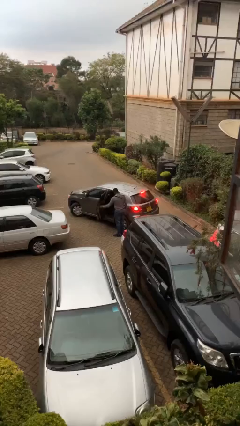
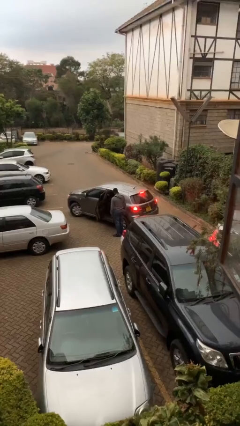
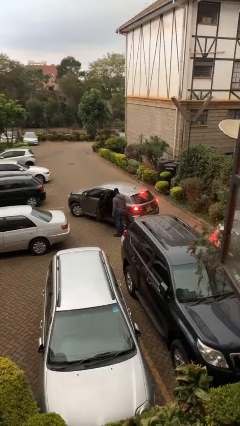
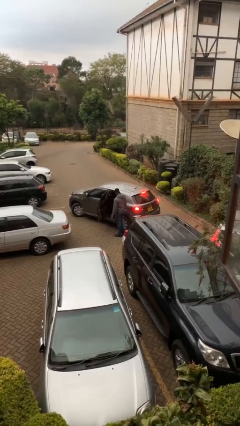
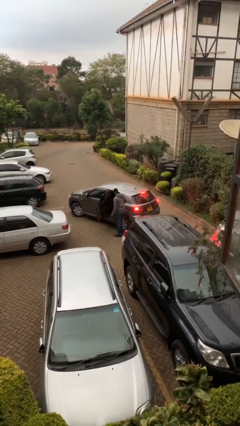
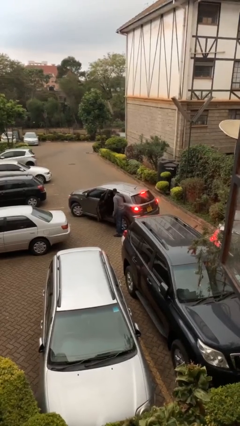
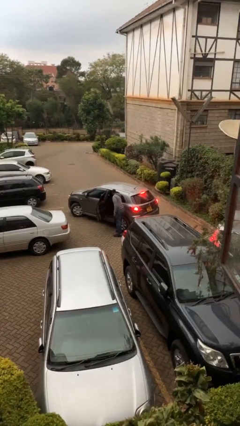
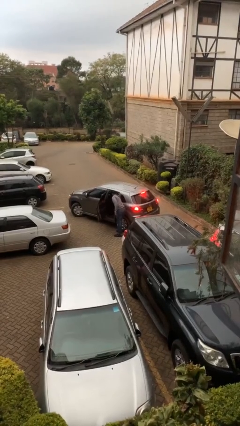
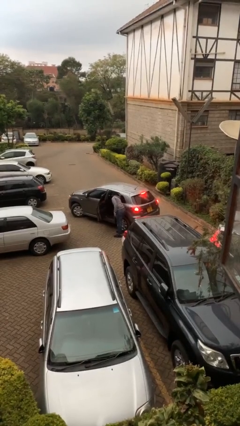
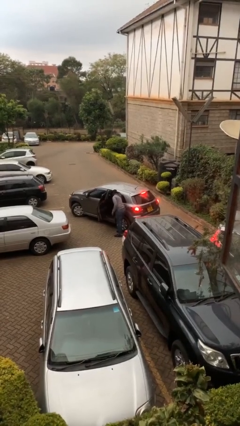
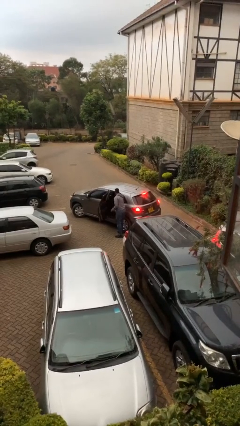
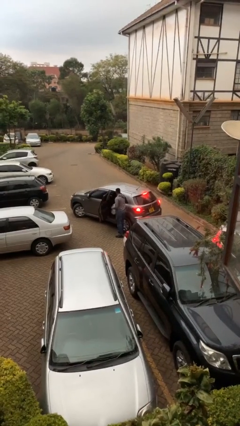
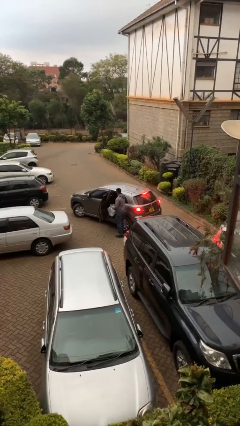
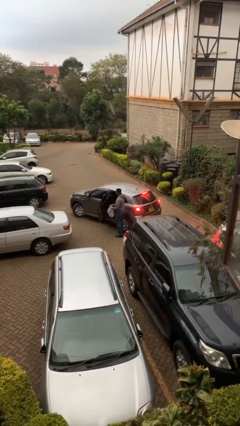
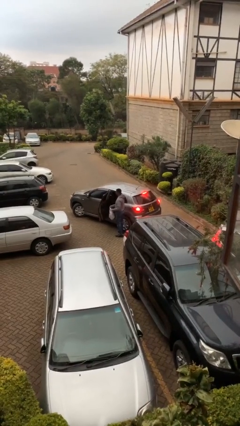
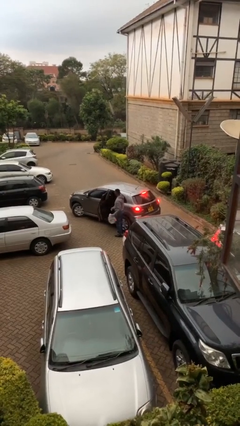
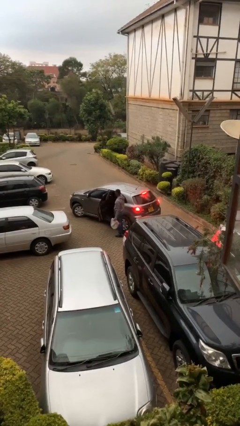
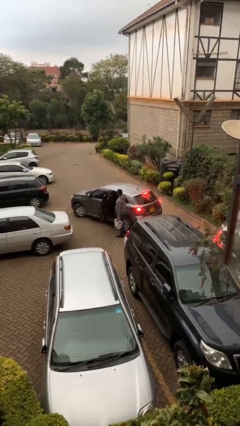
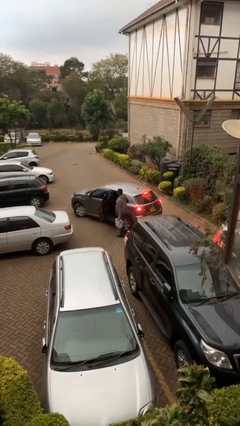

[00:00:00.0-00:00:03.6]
person unloads car

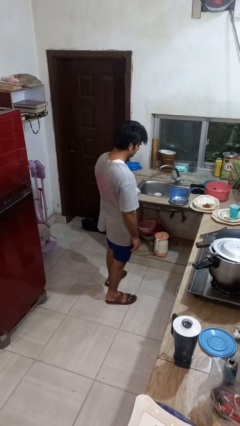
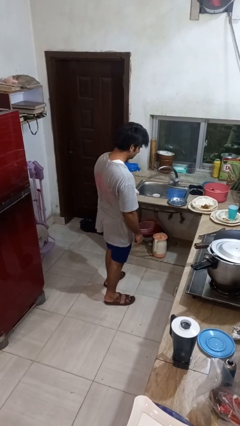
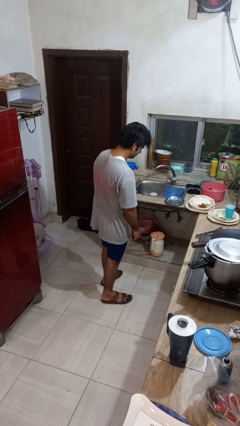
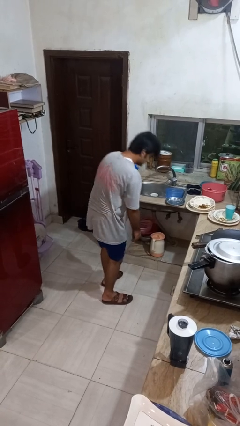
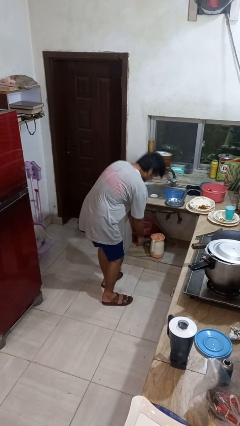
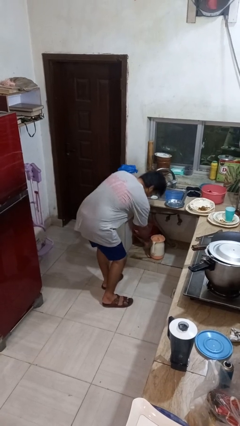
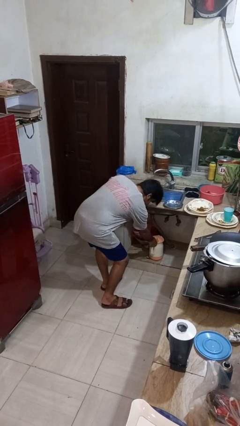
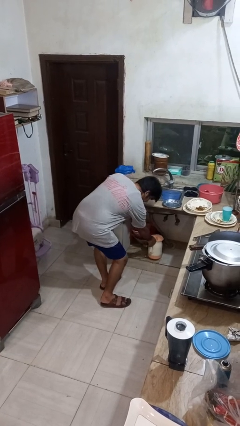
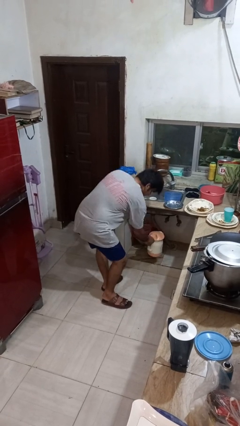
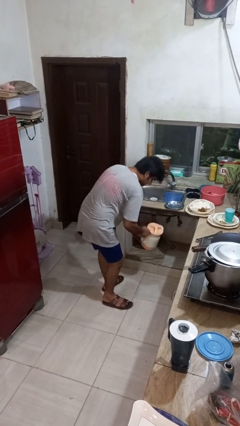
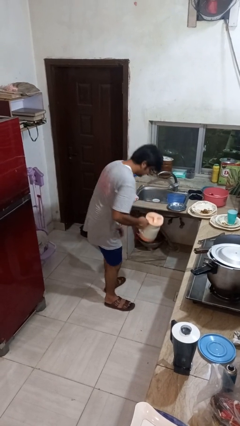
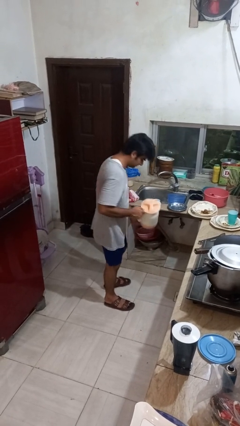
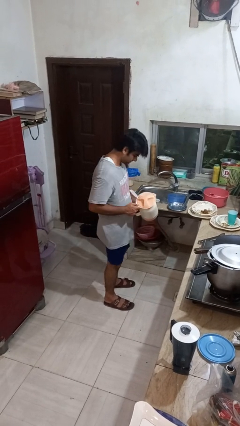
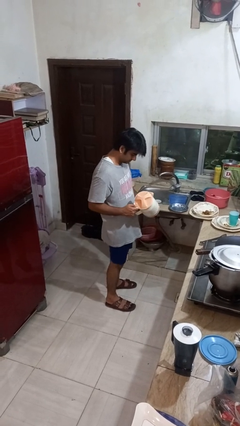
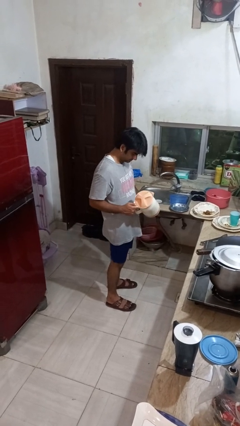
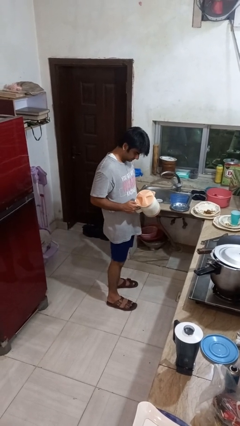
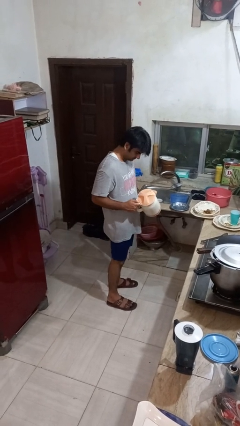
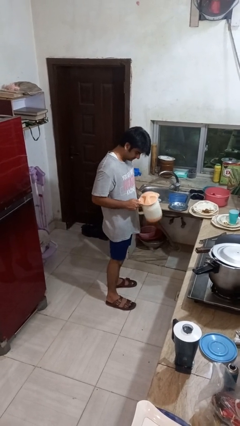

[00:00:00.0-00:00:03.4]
person picks up object from cabinet

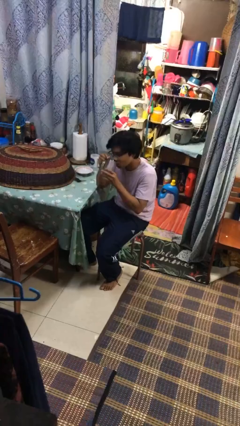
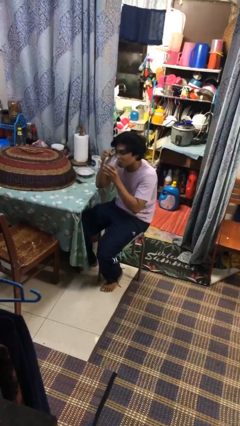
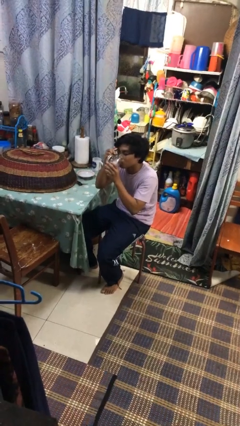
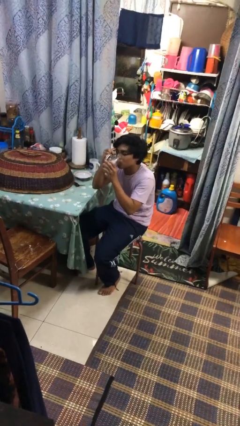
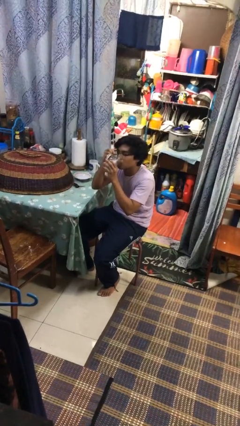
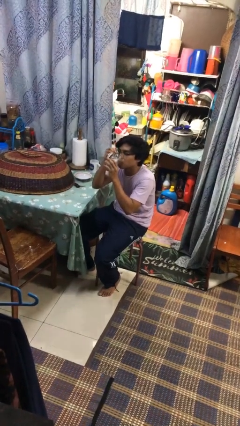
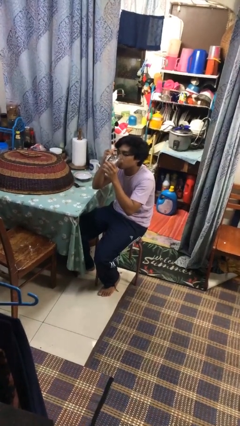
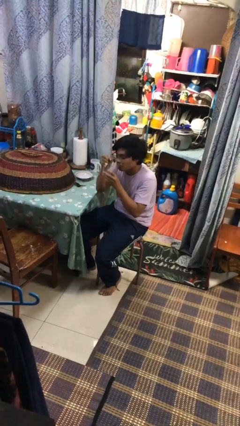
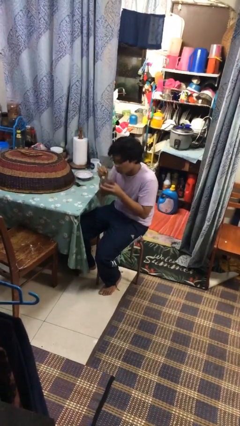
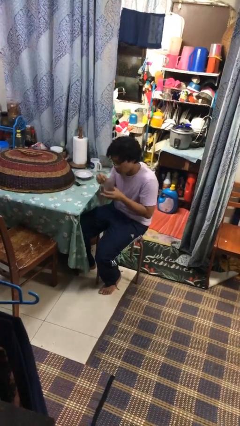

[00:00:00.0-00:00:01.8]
person drinks from mug

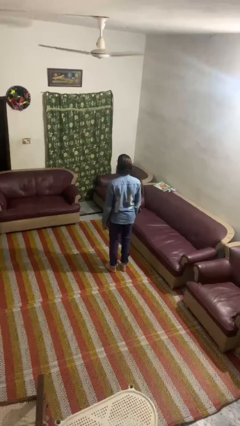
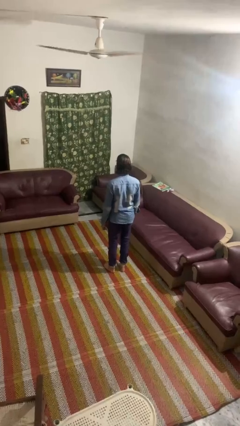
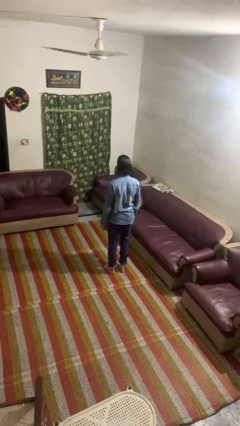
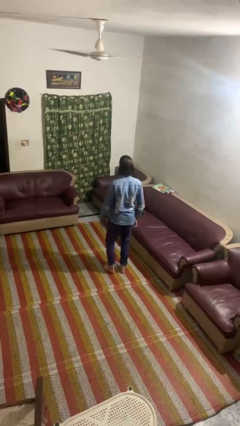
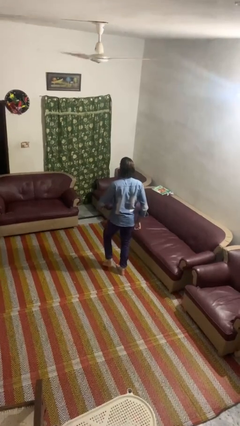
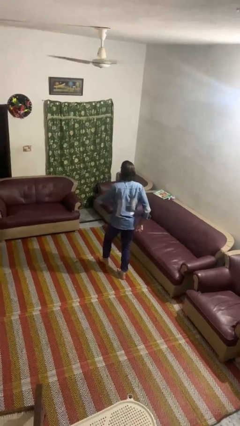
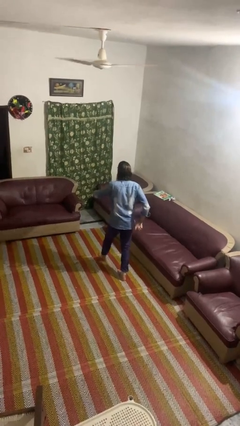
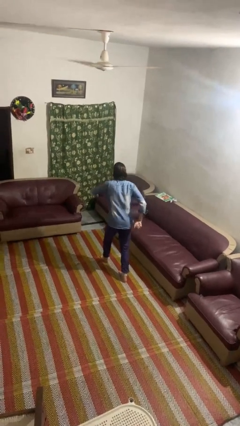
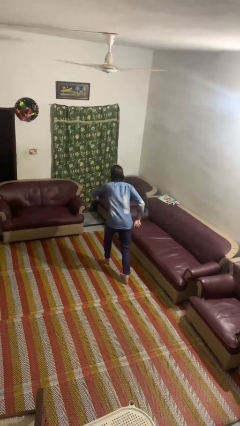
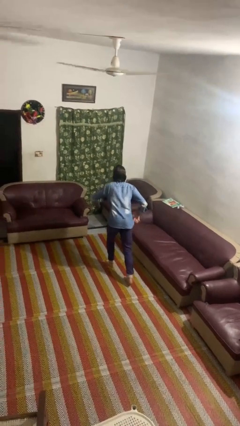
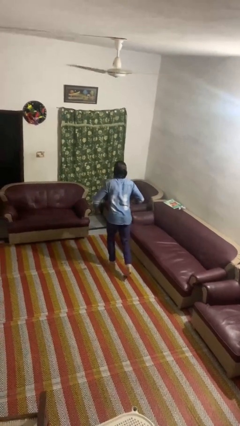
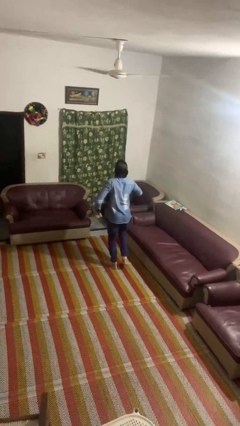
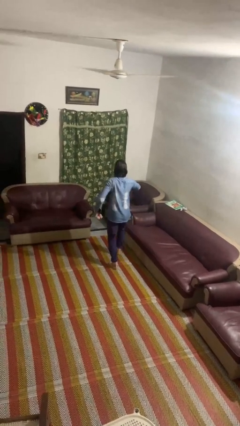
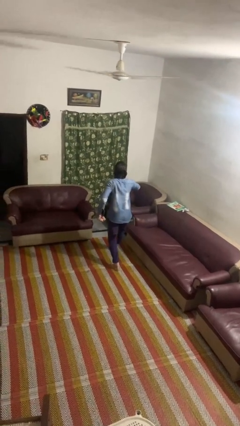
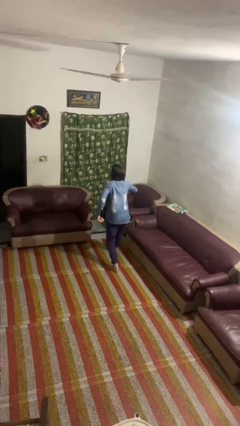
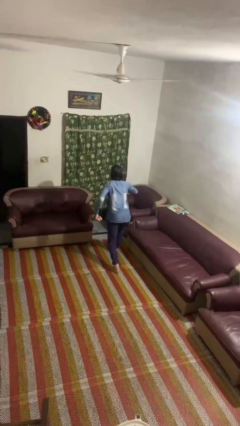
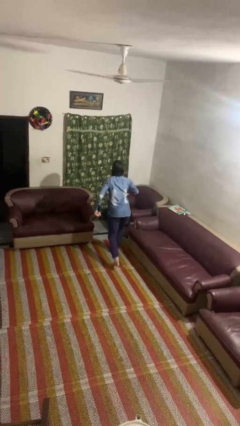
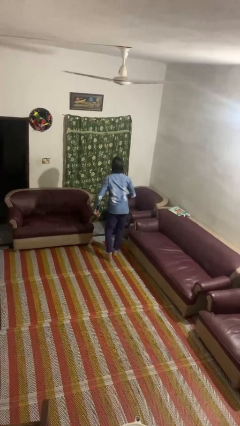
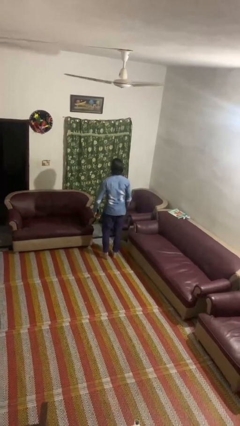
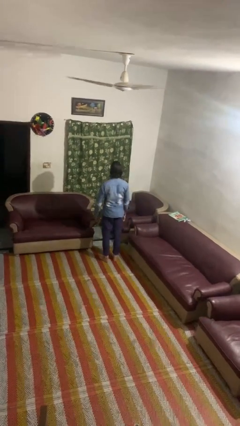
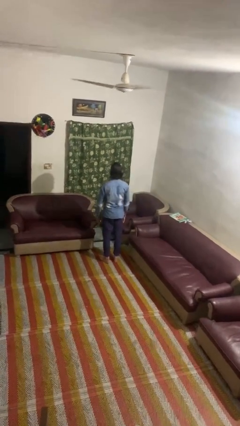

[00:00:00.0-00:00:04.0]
person walks tiptoe

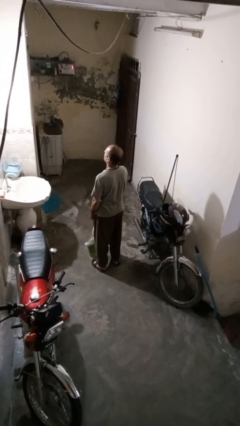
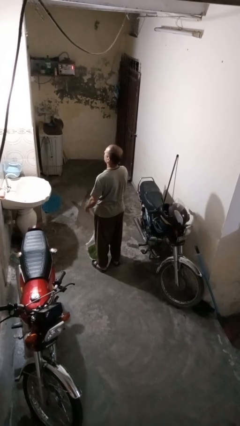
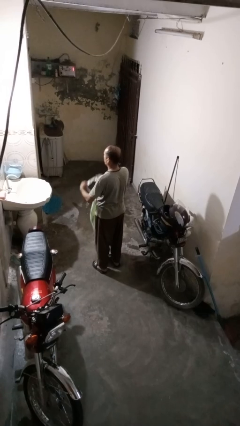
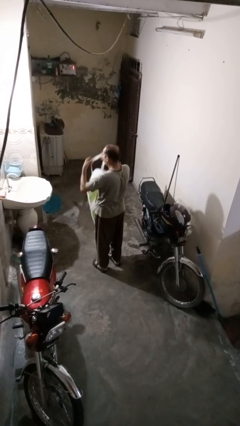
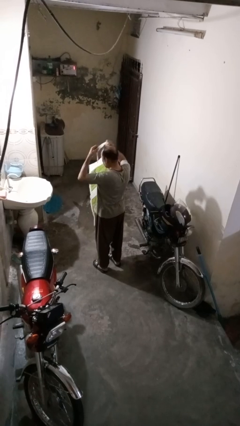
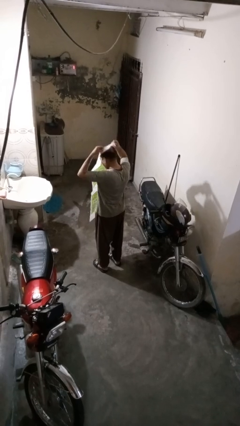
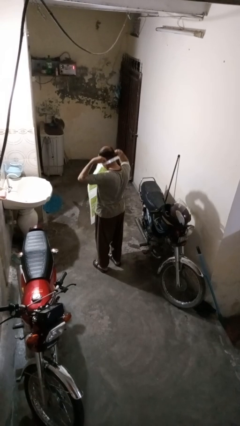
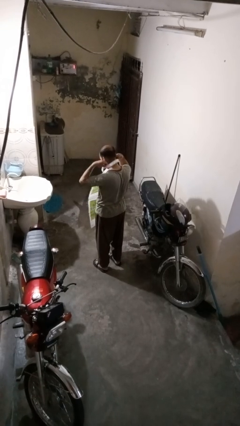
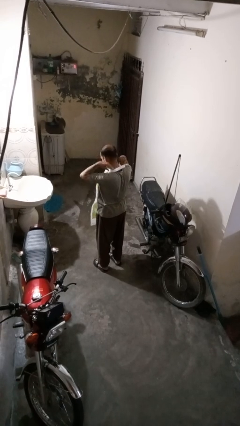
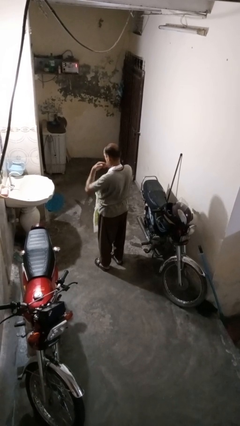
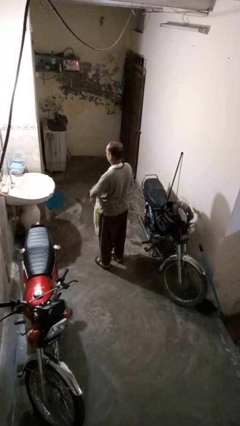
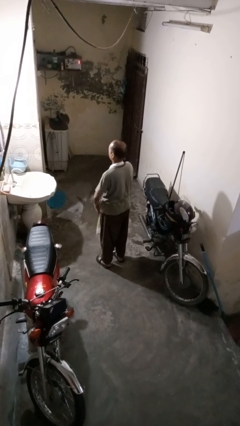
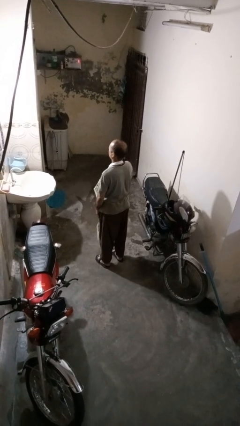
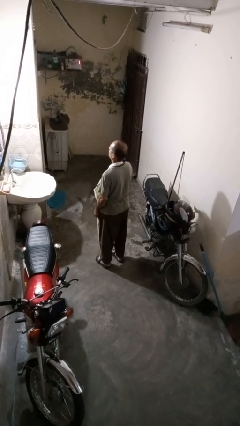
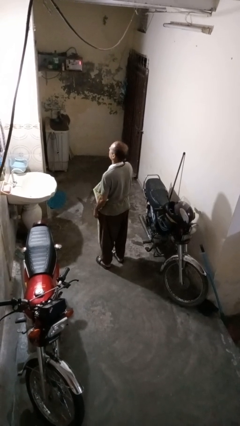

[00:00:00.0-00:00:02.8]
person puts on apron

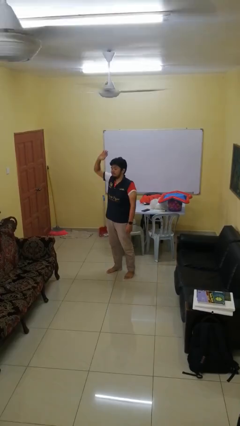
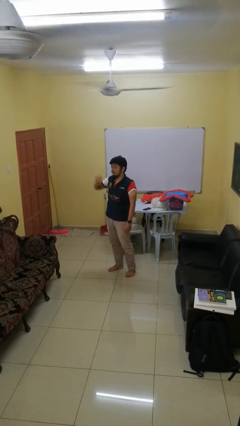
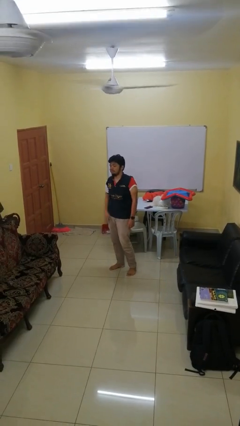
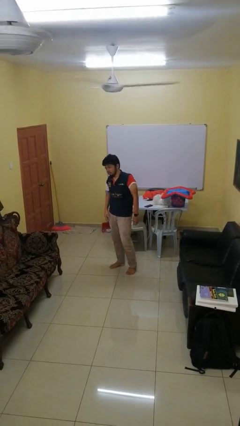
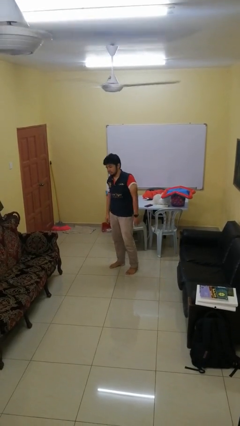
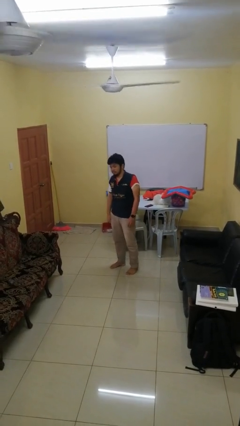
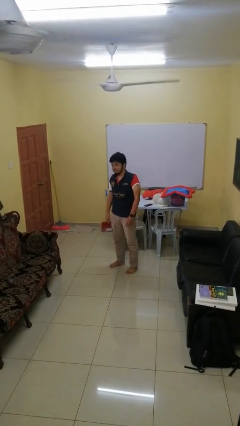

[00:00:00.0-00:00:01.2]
person gestures lower hand

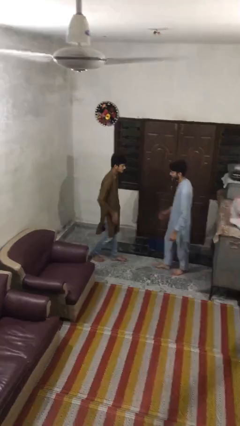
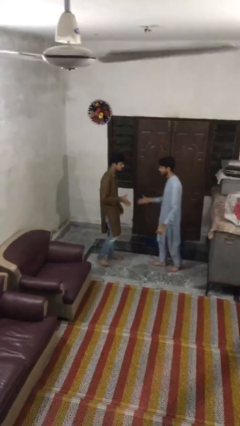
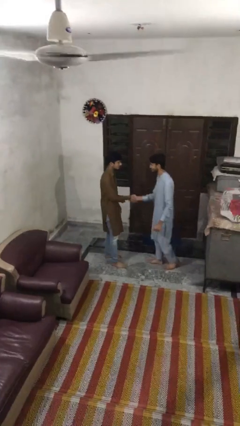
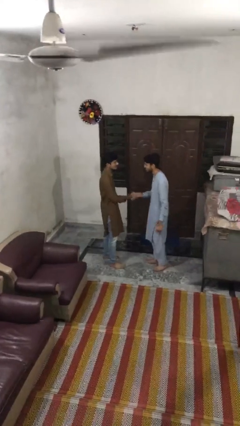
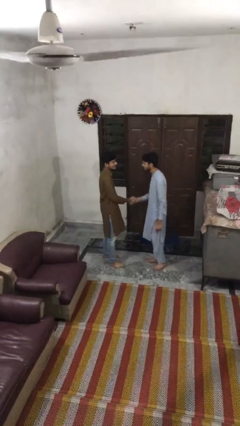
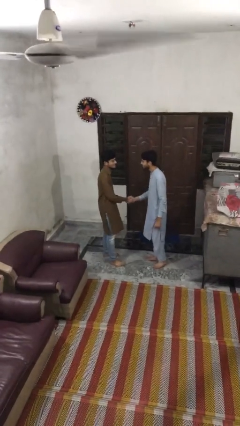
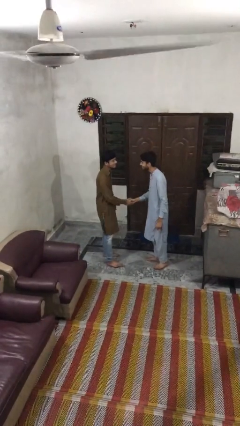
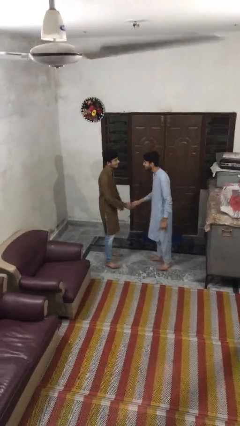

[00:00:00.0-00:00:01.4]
person shakes hand
